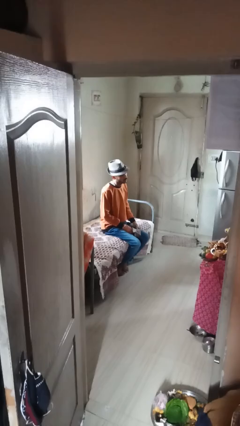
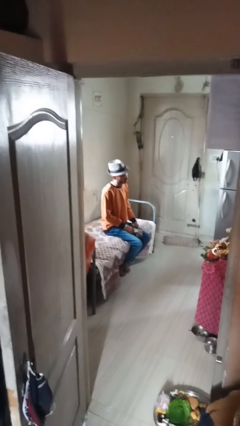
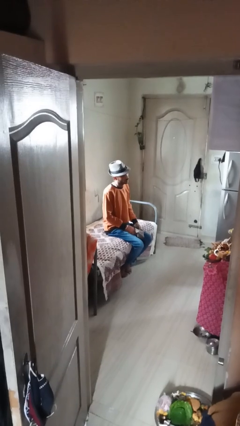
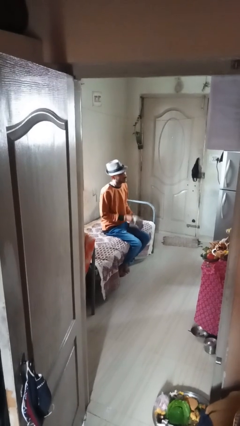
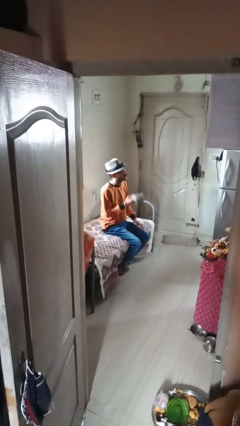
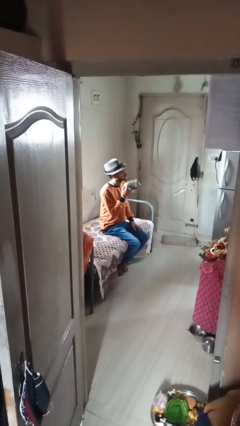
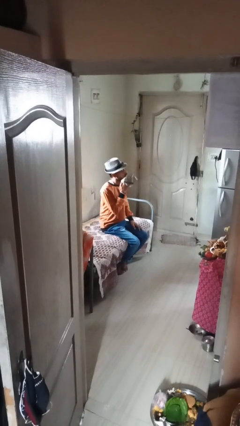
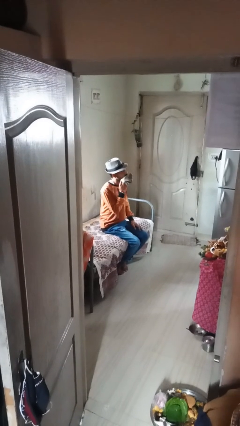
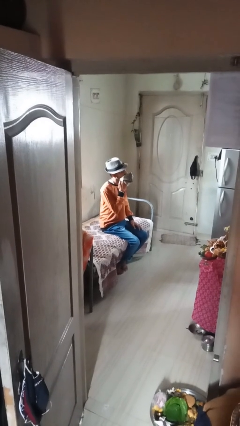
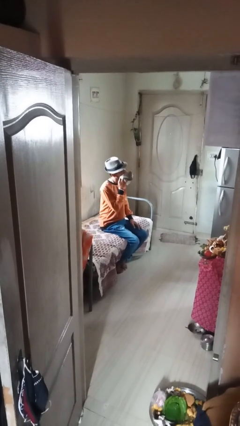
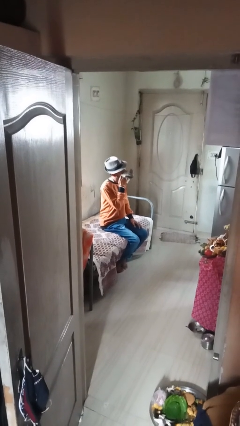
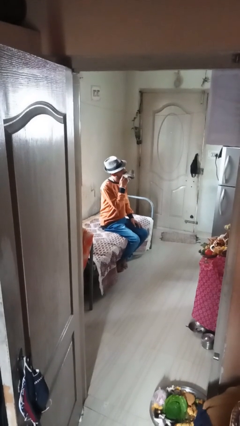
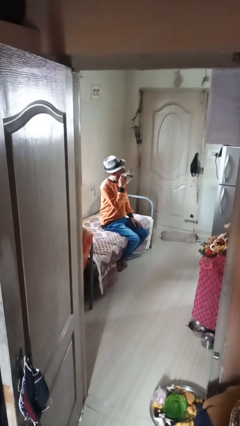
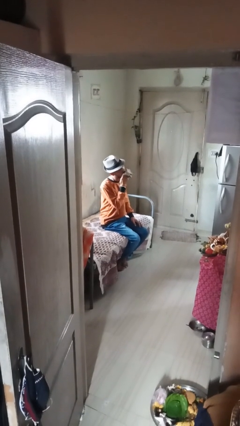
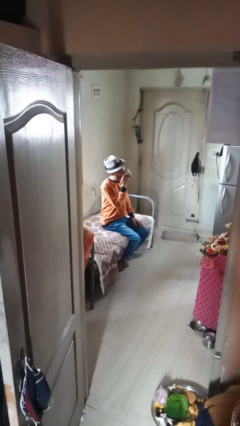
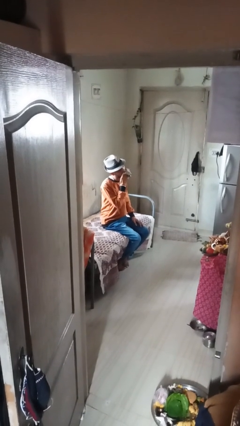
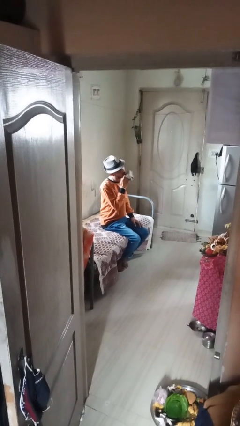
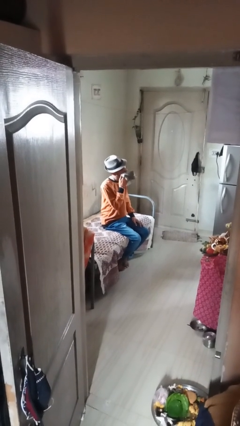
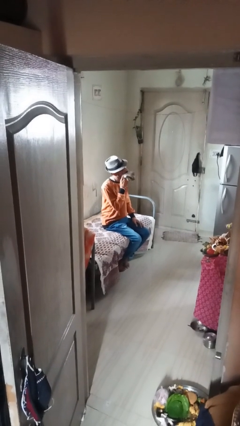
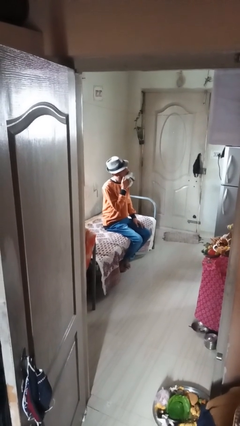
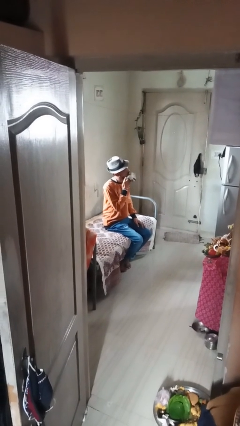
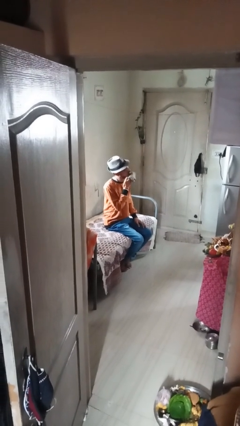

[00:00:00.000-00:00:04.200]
person wipes mouth with napkin

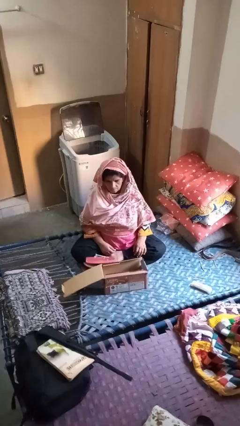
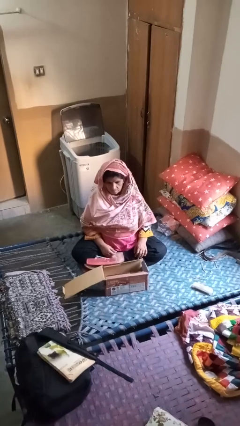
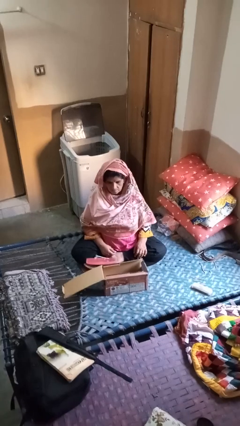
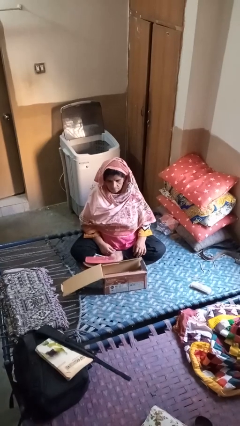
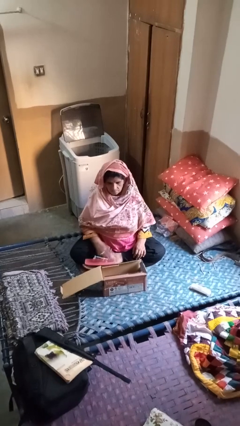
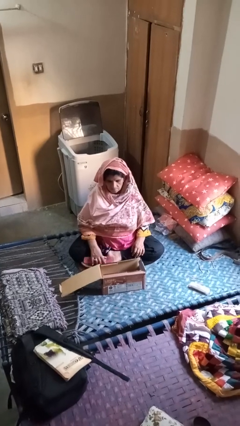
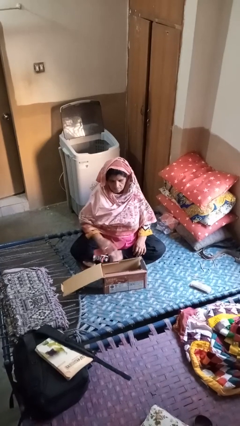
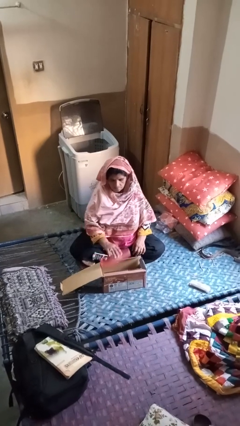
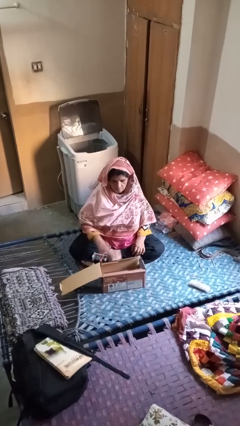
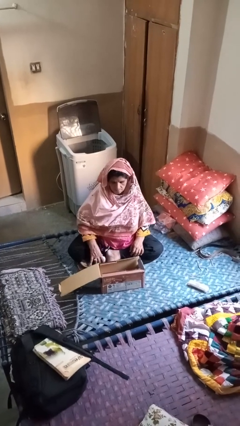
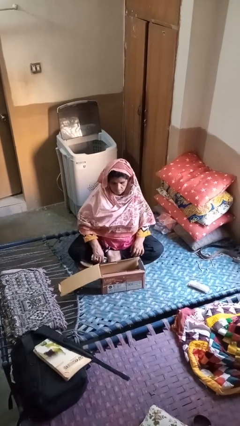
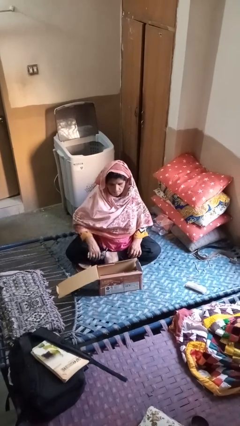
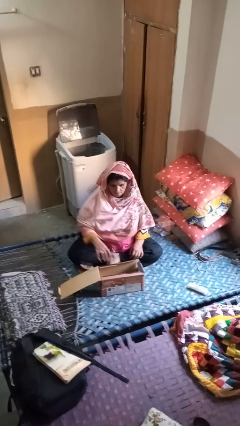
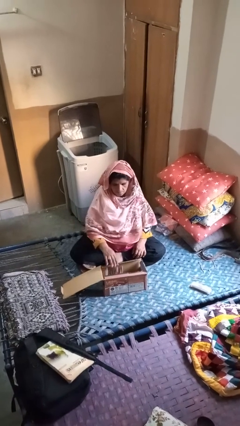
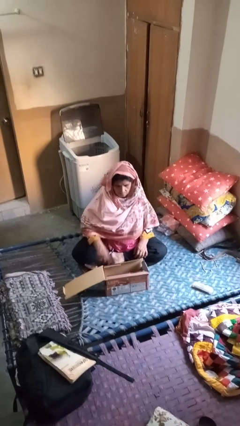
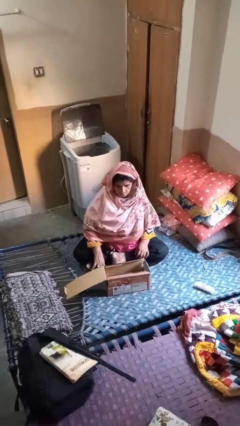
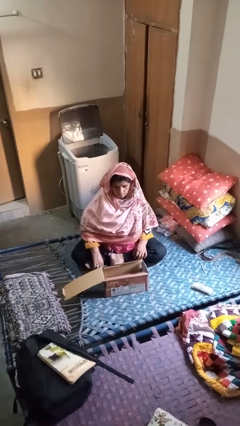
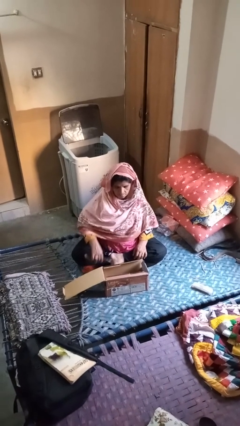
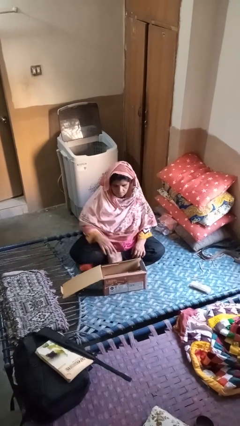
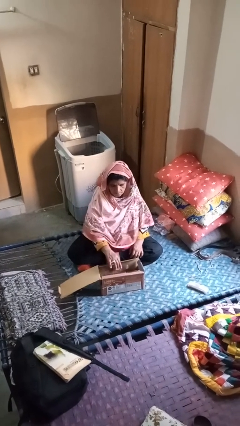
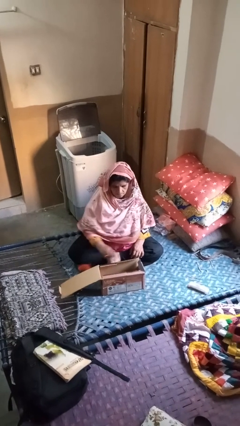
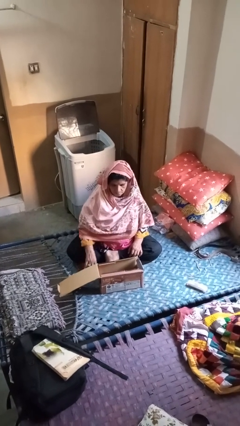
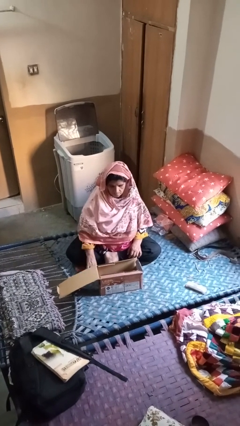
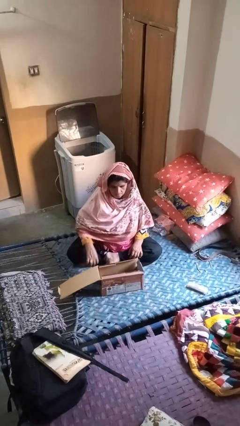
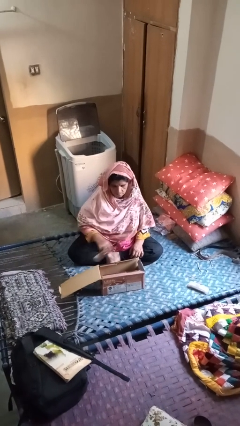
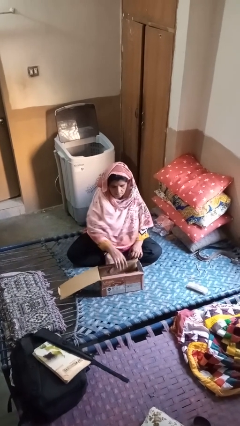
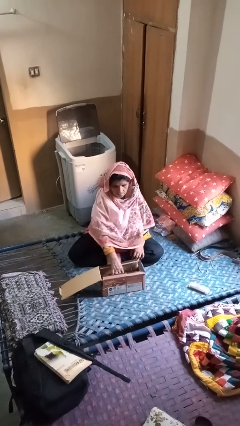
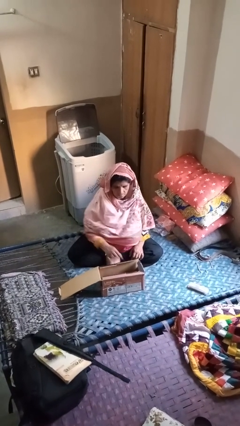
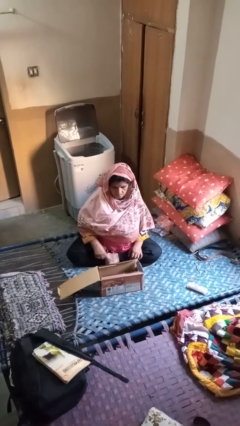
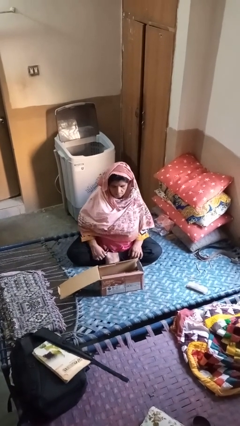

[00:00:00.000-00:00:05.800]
person puts object into box

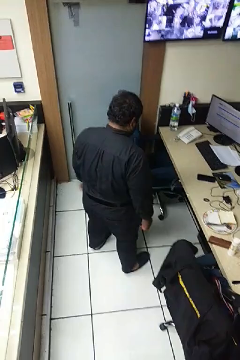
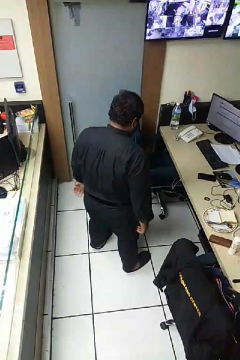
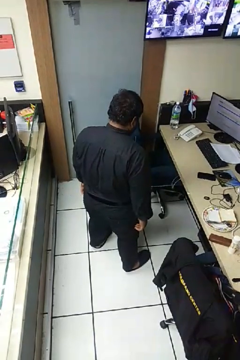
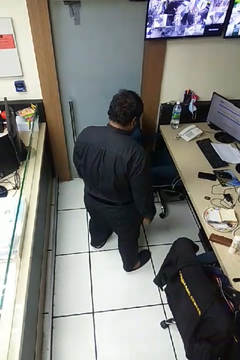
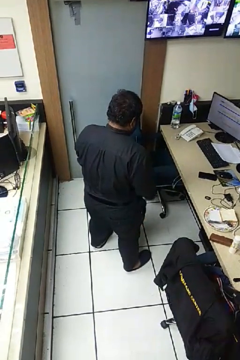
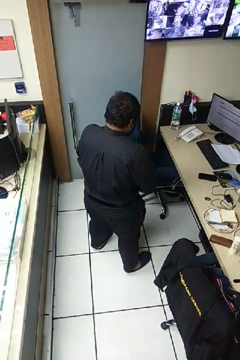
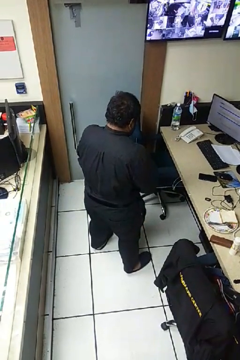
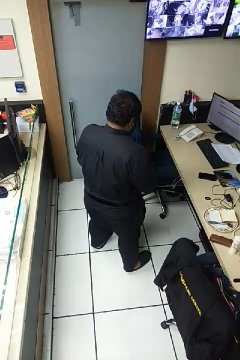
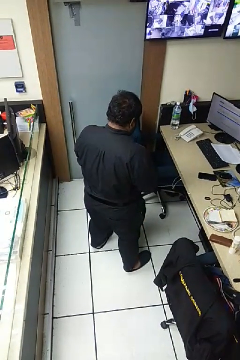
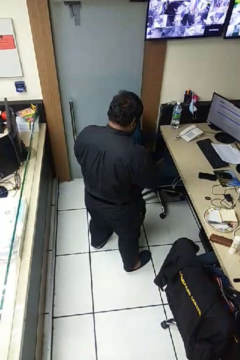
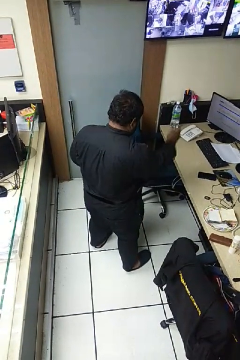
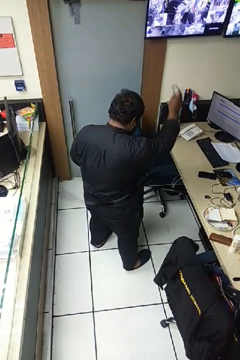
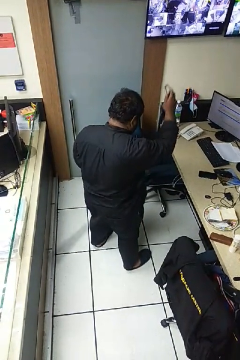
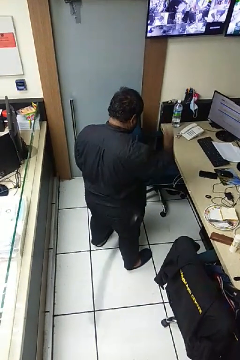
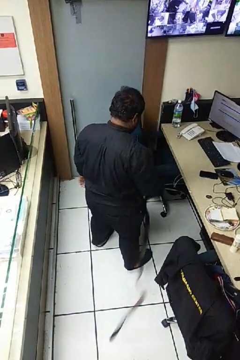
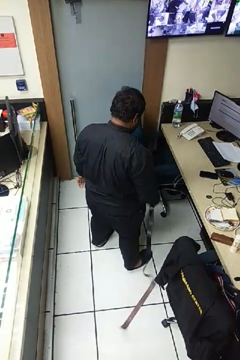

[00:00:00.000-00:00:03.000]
person takes off belt

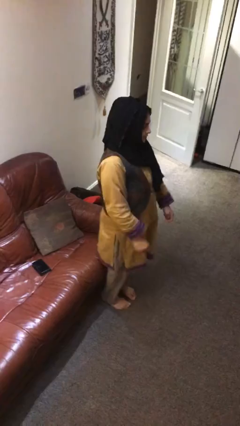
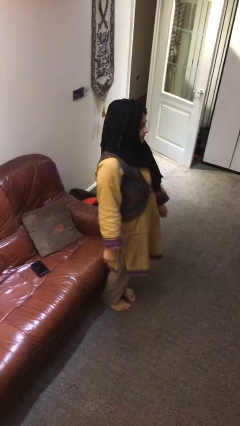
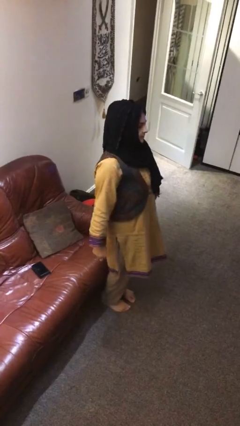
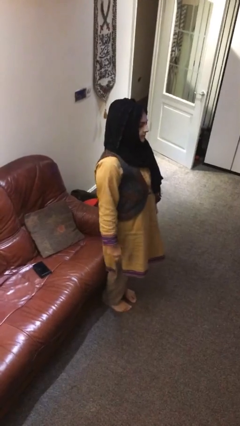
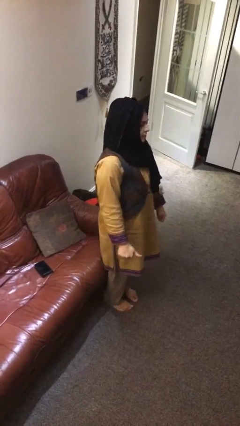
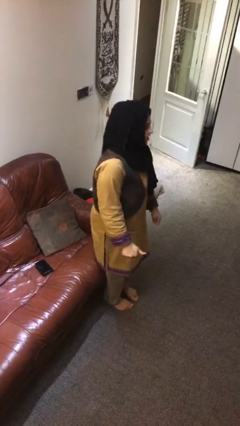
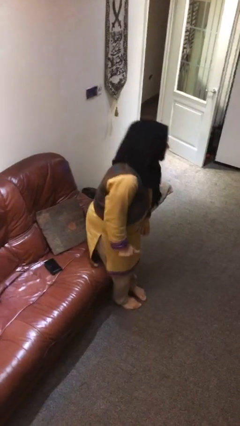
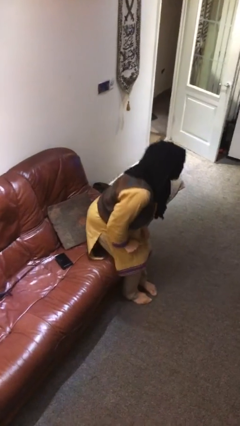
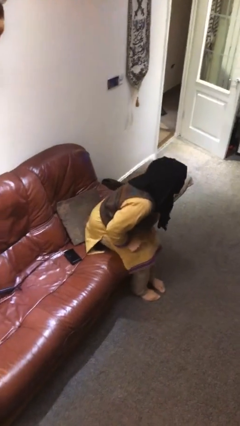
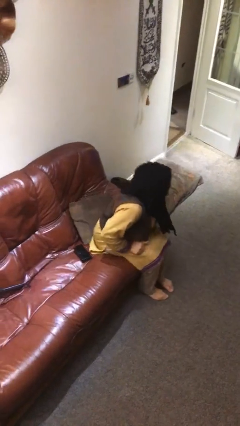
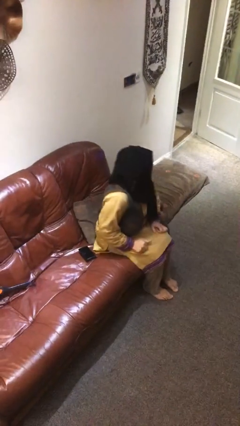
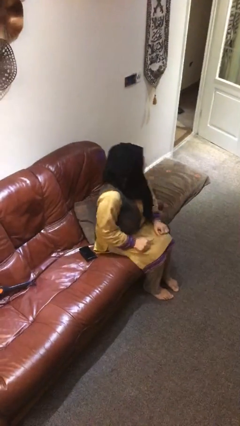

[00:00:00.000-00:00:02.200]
person sits down

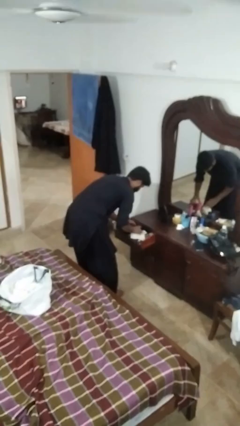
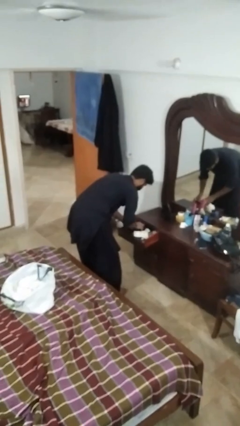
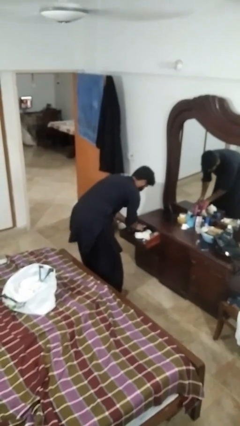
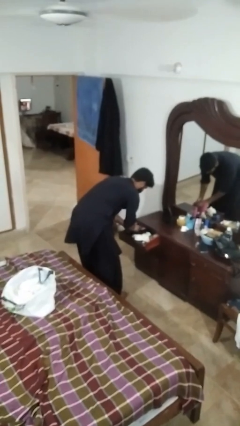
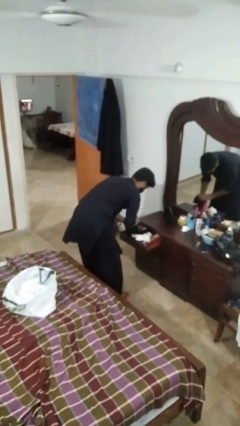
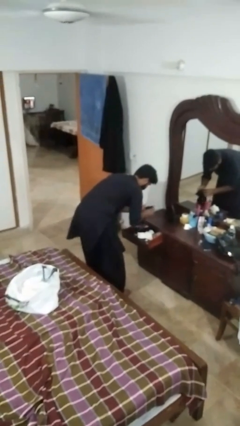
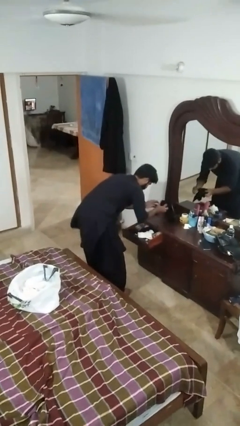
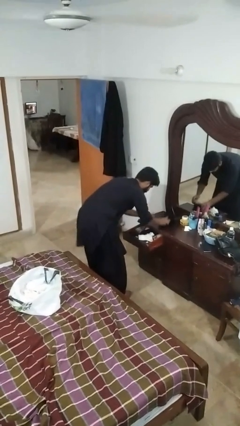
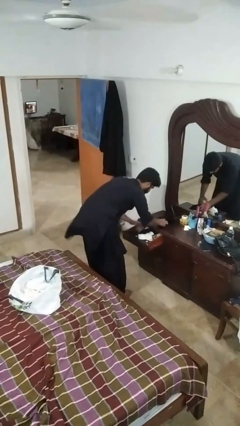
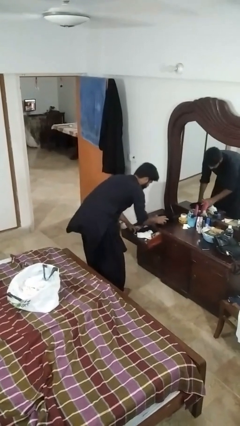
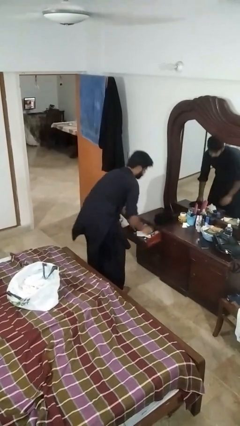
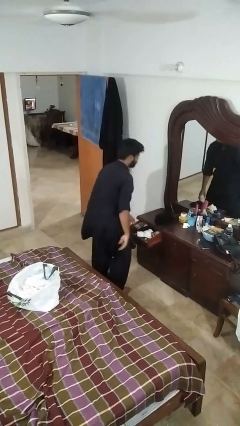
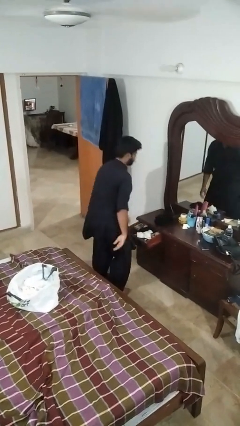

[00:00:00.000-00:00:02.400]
person takes clothes from dresser
